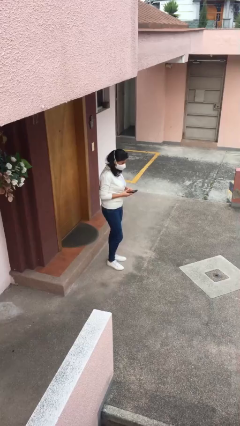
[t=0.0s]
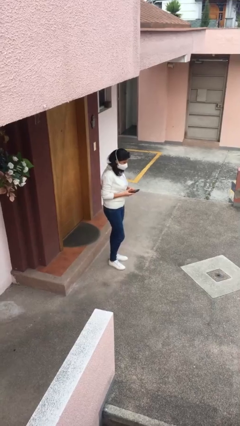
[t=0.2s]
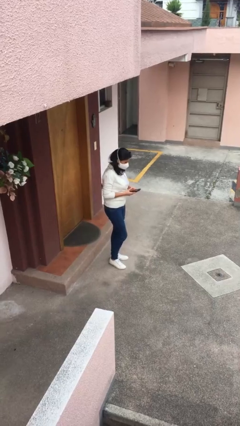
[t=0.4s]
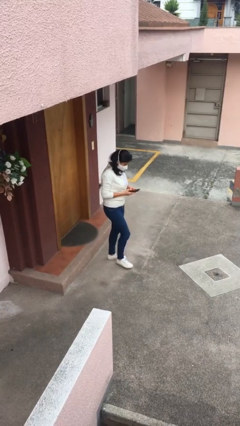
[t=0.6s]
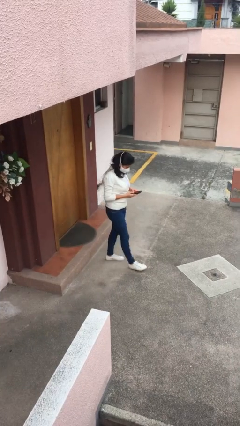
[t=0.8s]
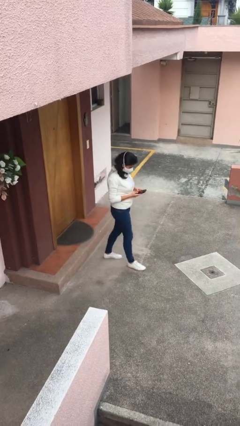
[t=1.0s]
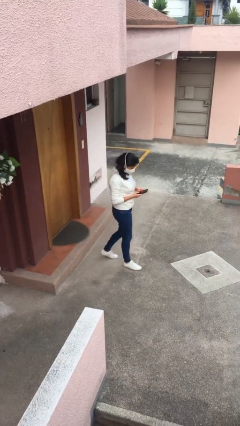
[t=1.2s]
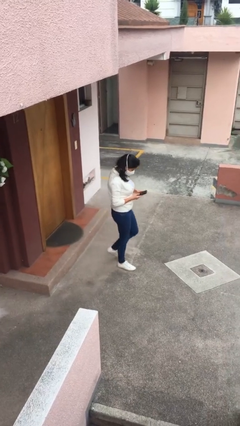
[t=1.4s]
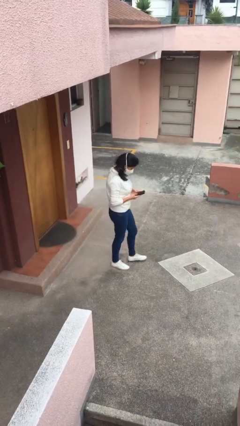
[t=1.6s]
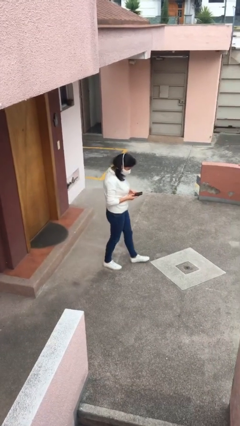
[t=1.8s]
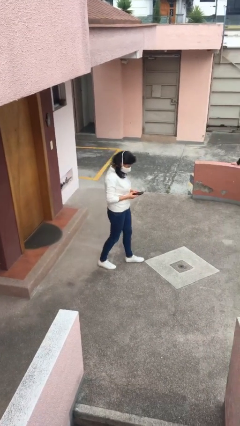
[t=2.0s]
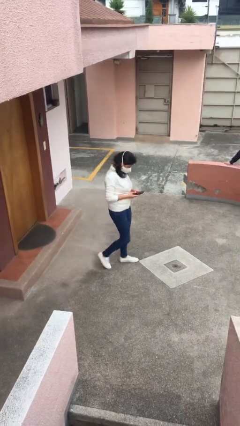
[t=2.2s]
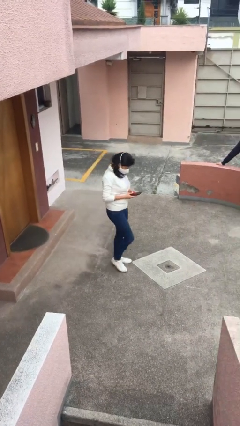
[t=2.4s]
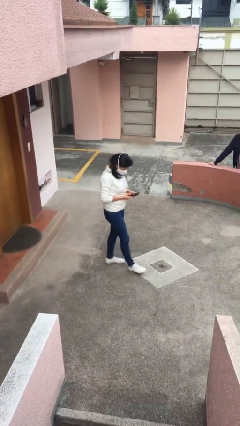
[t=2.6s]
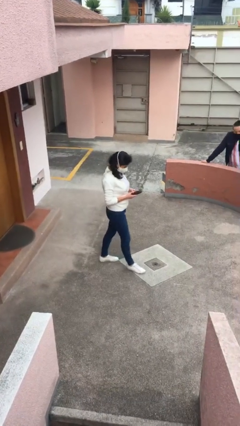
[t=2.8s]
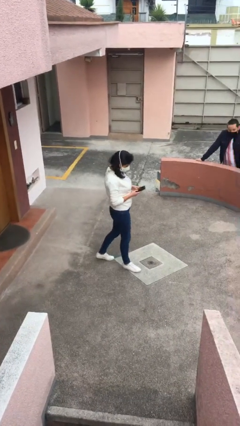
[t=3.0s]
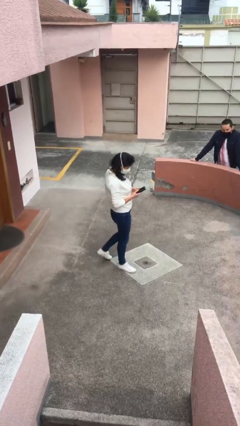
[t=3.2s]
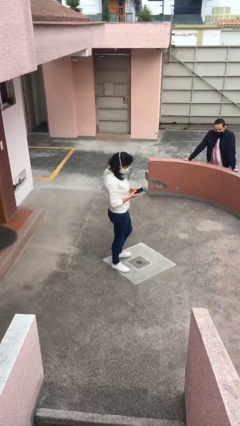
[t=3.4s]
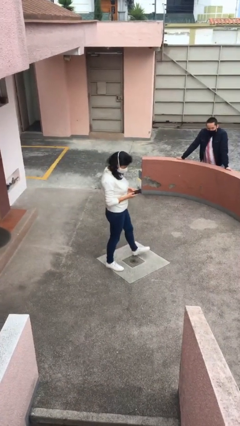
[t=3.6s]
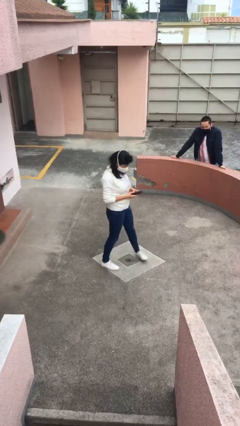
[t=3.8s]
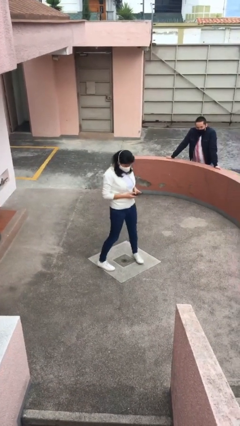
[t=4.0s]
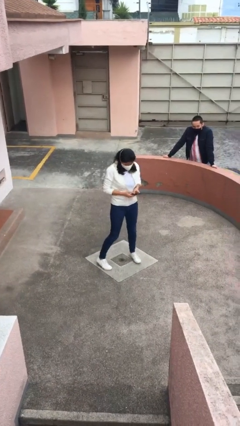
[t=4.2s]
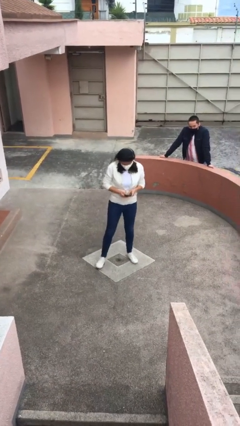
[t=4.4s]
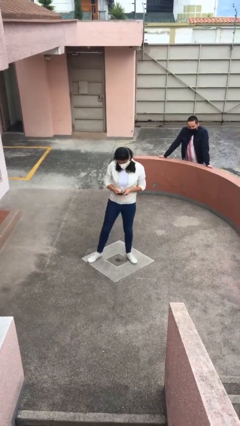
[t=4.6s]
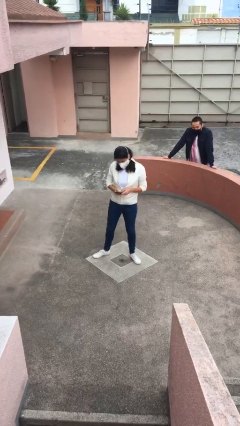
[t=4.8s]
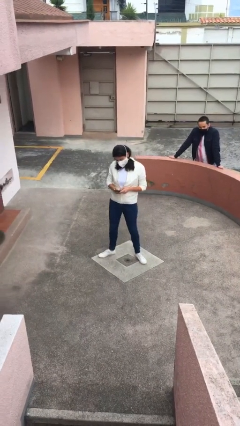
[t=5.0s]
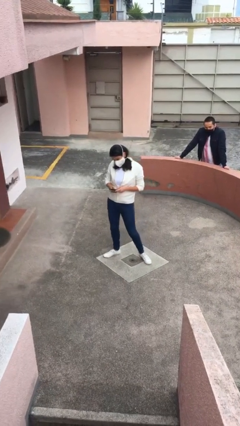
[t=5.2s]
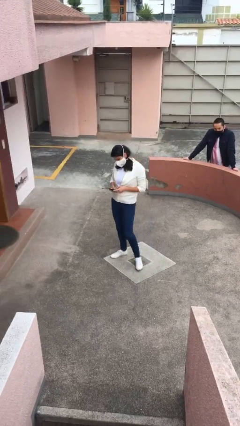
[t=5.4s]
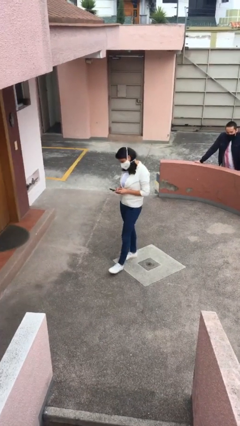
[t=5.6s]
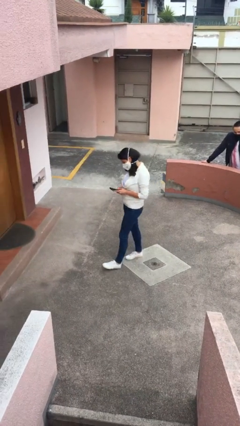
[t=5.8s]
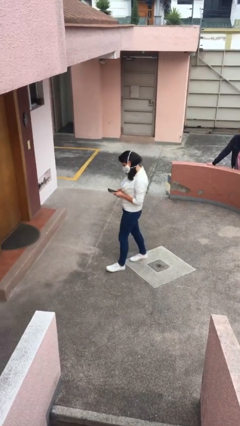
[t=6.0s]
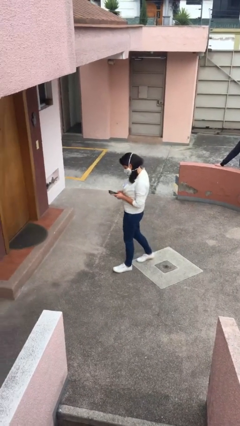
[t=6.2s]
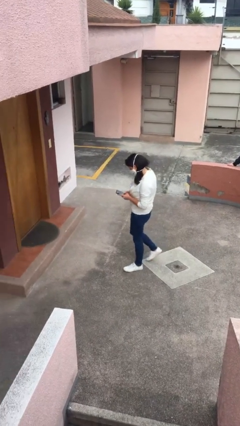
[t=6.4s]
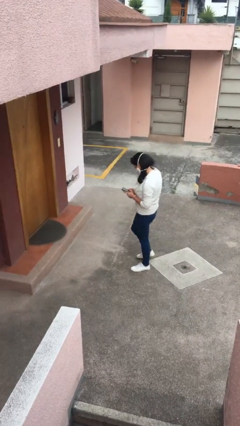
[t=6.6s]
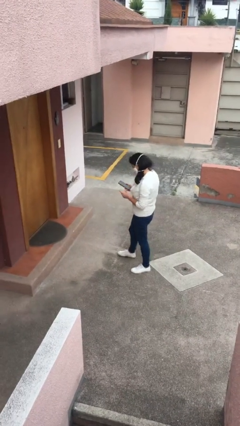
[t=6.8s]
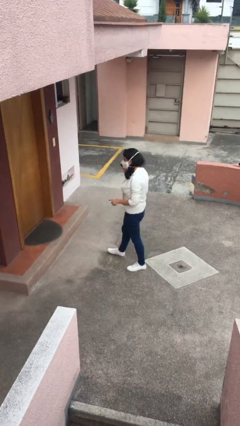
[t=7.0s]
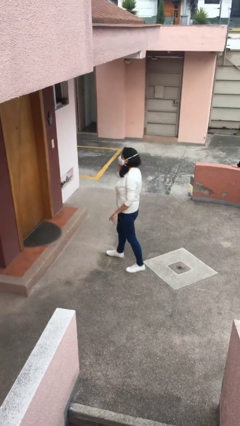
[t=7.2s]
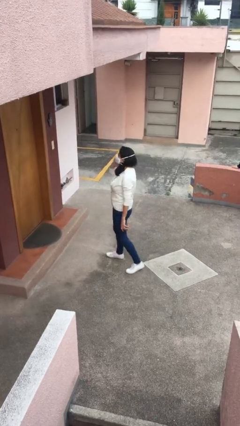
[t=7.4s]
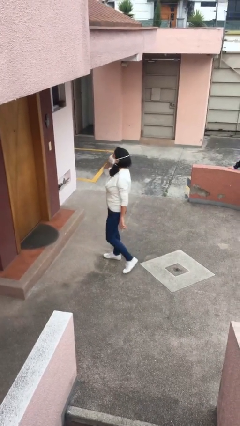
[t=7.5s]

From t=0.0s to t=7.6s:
person texts on phone

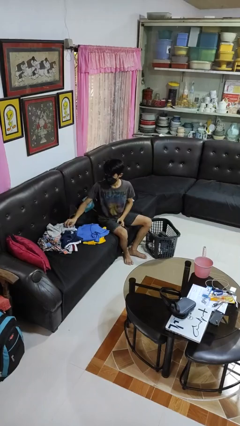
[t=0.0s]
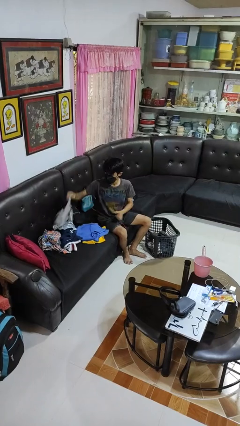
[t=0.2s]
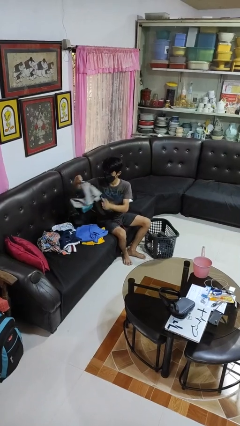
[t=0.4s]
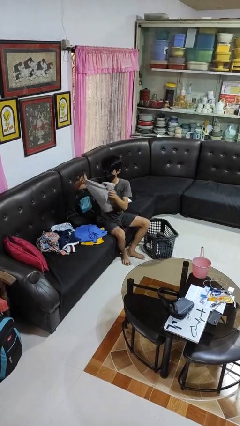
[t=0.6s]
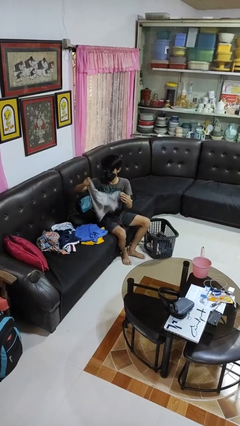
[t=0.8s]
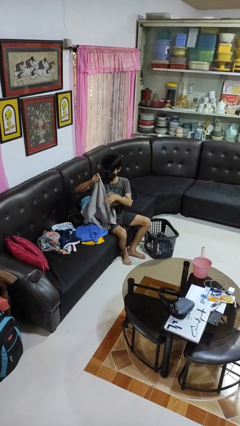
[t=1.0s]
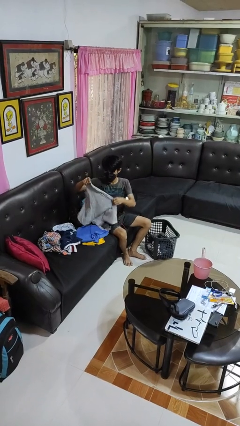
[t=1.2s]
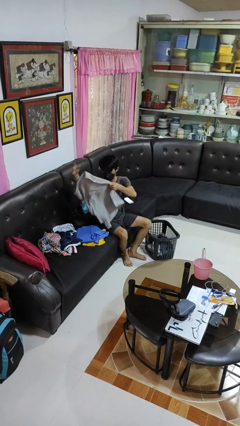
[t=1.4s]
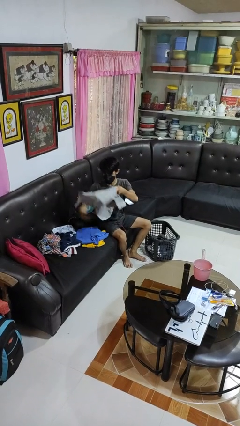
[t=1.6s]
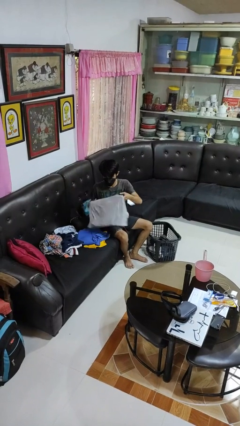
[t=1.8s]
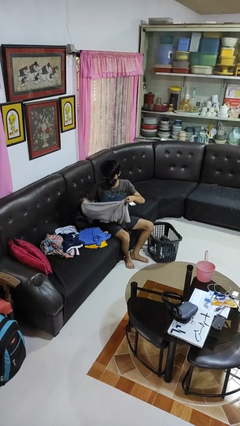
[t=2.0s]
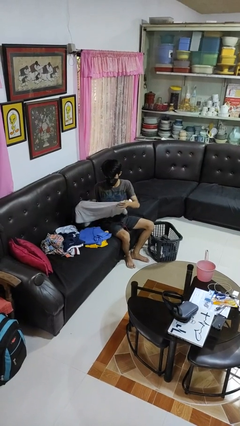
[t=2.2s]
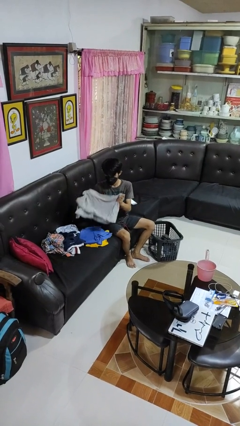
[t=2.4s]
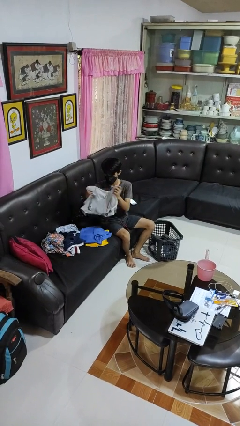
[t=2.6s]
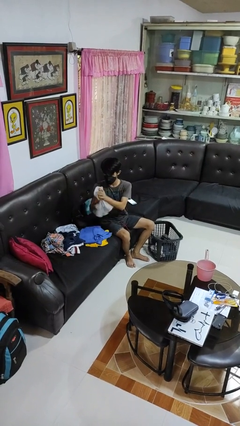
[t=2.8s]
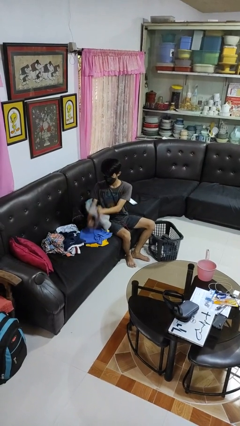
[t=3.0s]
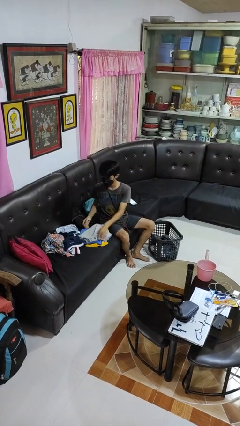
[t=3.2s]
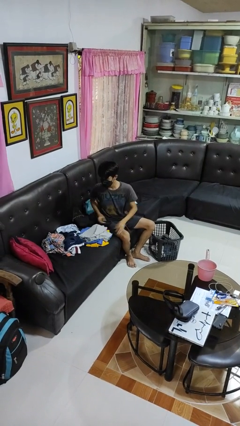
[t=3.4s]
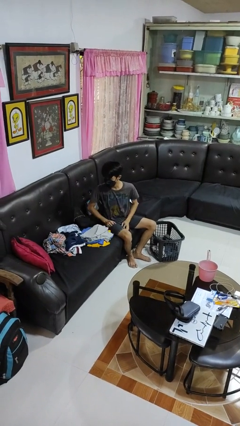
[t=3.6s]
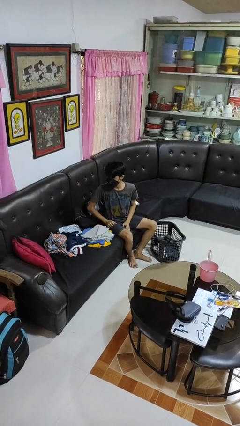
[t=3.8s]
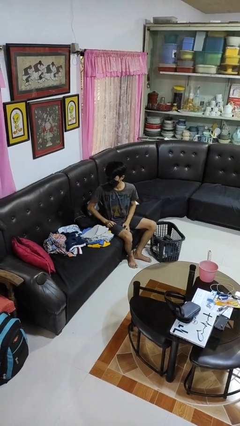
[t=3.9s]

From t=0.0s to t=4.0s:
person folds shirt

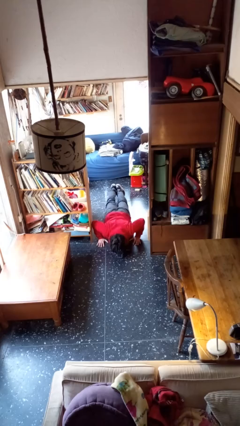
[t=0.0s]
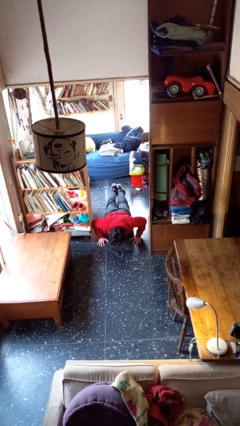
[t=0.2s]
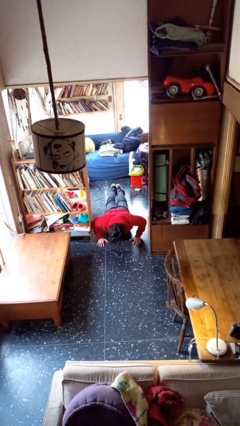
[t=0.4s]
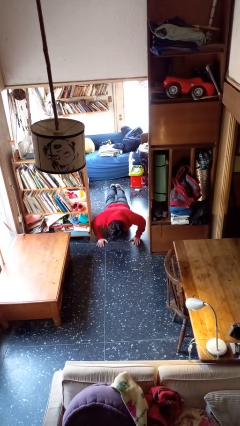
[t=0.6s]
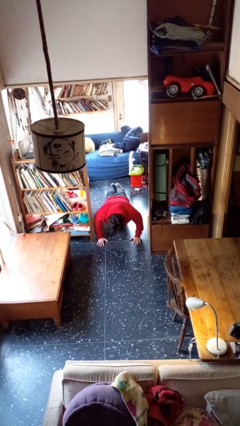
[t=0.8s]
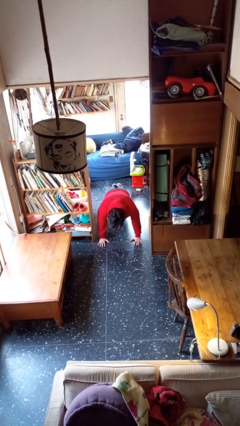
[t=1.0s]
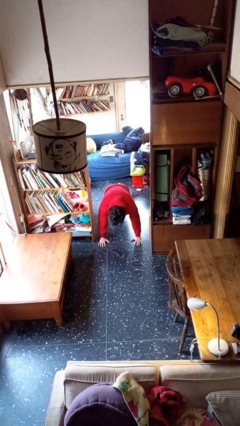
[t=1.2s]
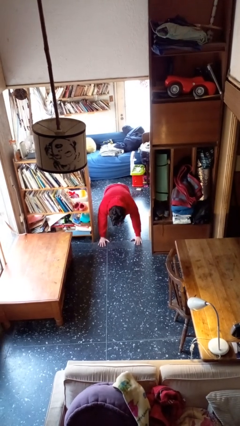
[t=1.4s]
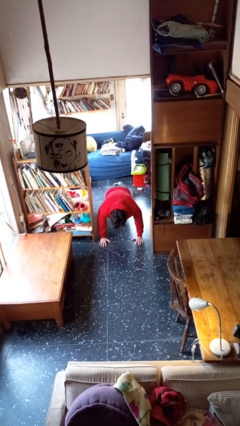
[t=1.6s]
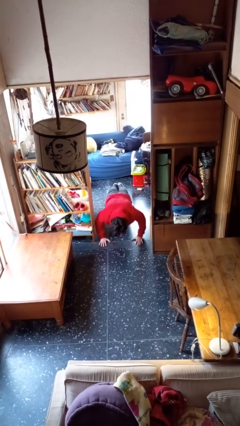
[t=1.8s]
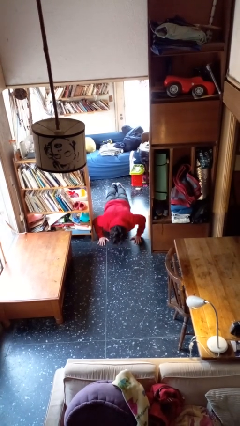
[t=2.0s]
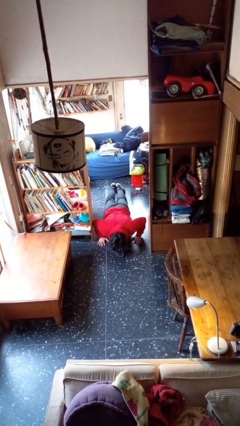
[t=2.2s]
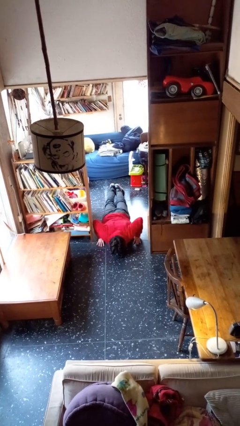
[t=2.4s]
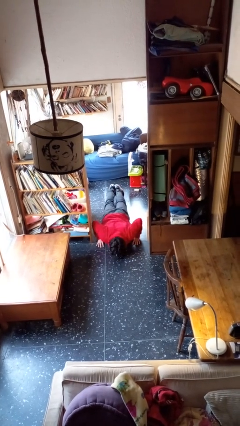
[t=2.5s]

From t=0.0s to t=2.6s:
person exercises with pushup

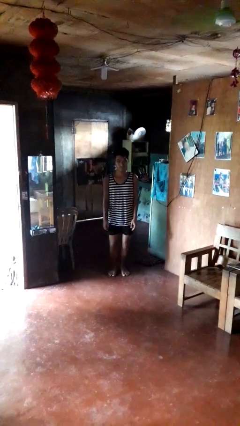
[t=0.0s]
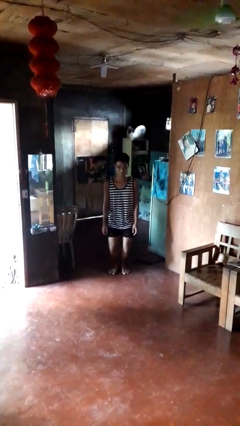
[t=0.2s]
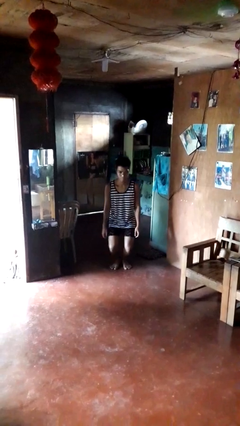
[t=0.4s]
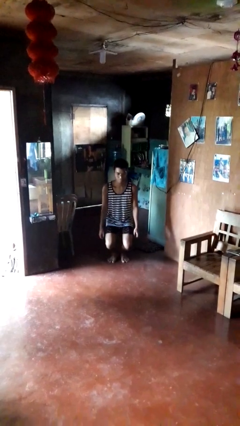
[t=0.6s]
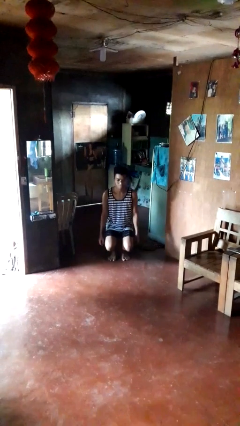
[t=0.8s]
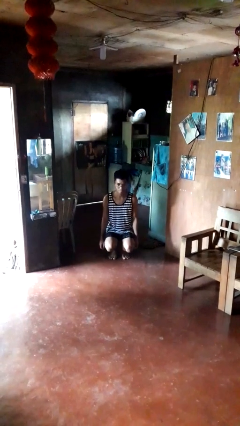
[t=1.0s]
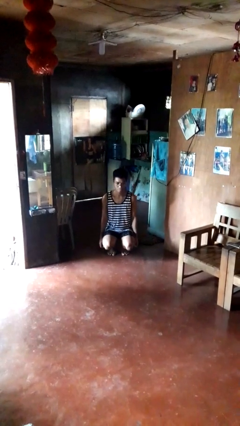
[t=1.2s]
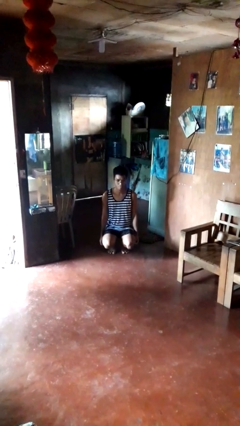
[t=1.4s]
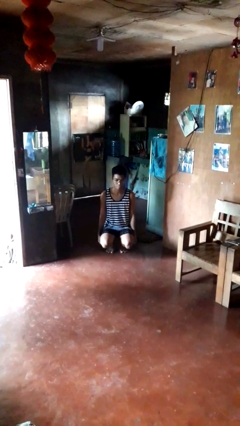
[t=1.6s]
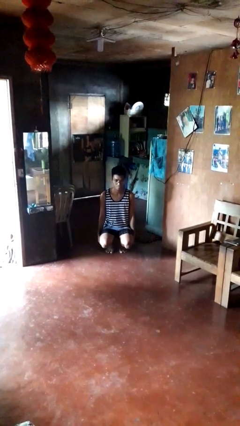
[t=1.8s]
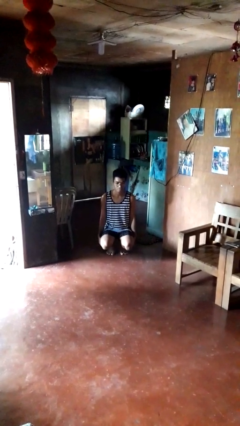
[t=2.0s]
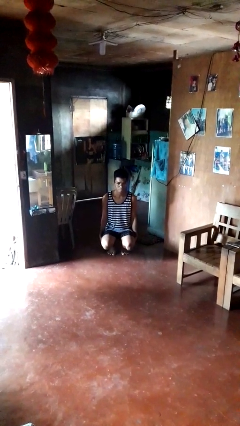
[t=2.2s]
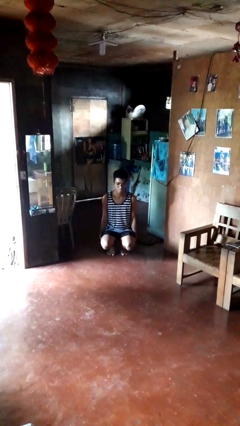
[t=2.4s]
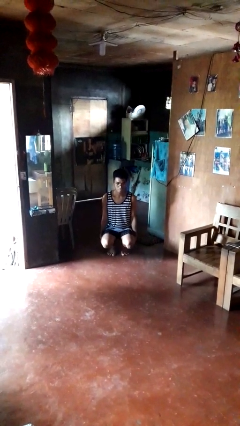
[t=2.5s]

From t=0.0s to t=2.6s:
person squats

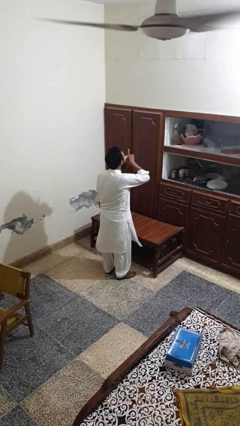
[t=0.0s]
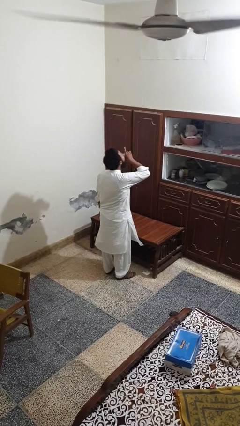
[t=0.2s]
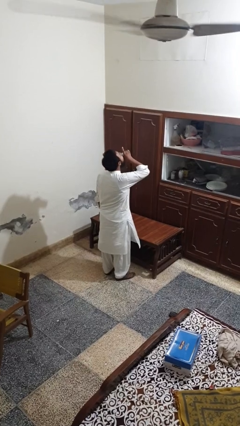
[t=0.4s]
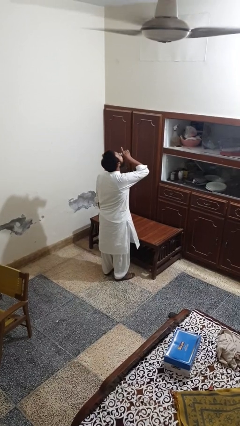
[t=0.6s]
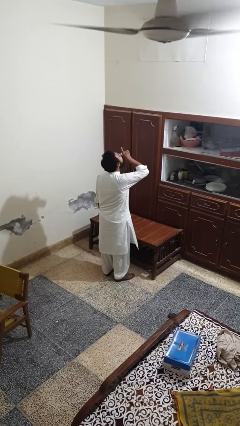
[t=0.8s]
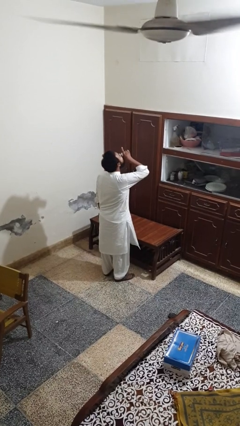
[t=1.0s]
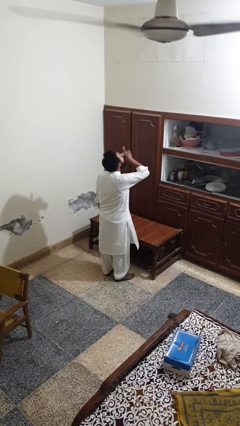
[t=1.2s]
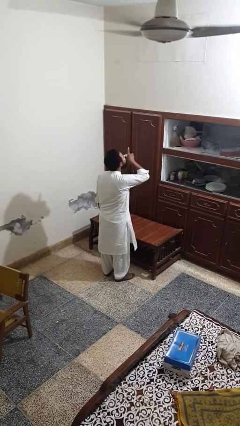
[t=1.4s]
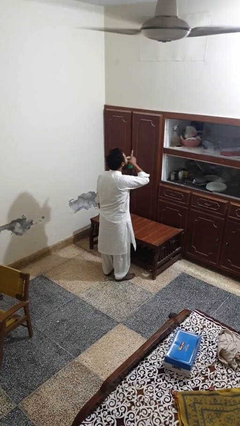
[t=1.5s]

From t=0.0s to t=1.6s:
person drinks from beverage can
